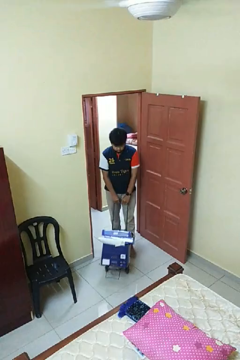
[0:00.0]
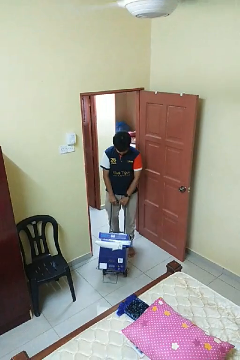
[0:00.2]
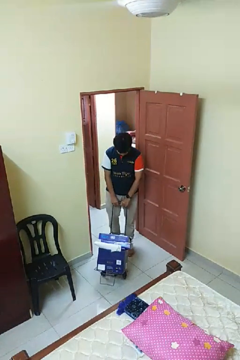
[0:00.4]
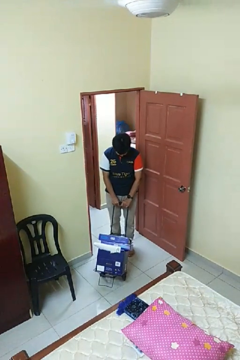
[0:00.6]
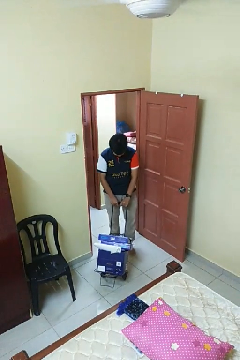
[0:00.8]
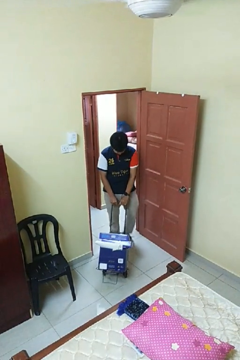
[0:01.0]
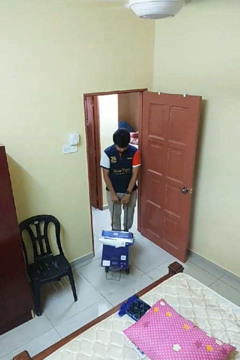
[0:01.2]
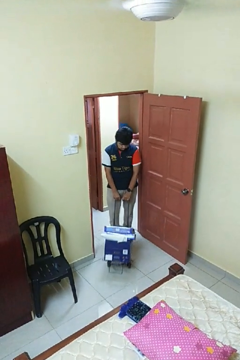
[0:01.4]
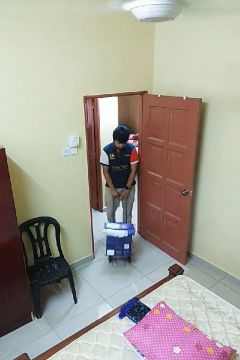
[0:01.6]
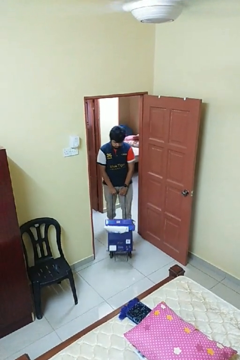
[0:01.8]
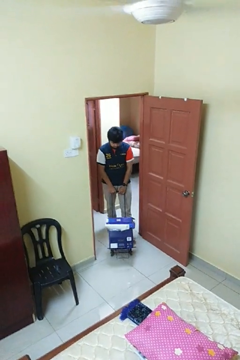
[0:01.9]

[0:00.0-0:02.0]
person pulls wheeled cart

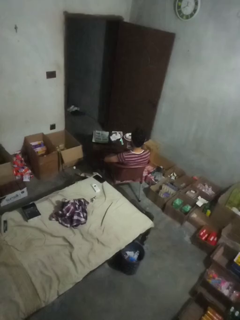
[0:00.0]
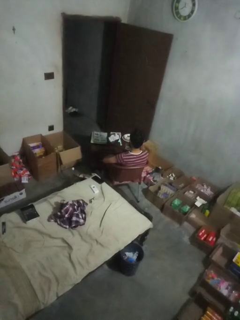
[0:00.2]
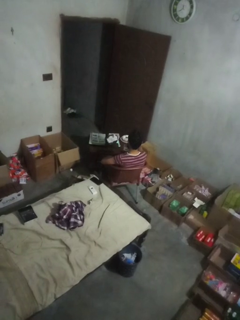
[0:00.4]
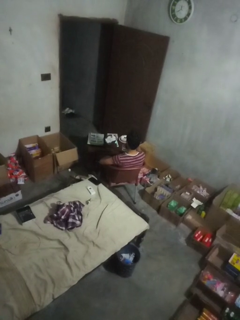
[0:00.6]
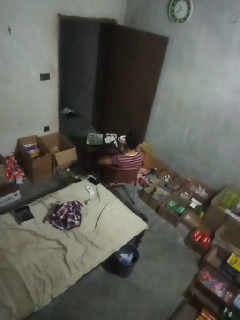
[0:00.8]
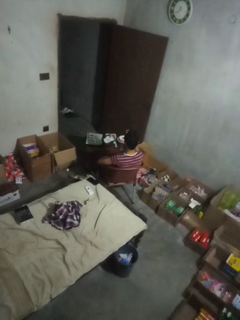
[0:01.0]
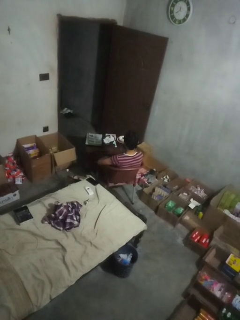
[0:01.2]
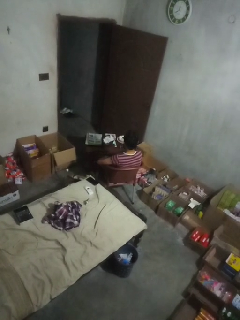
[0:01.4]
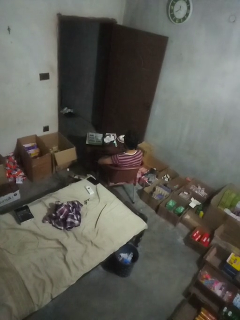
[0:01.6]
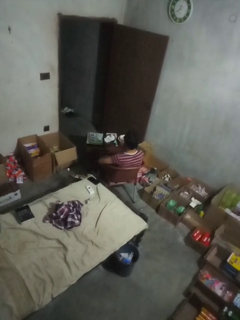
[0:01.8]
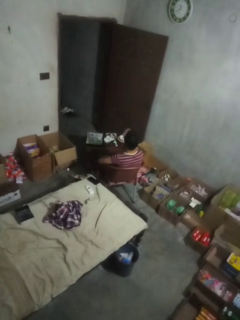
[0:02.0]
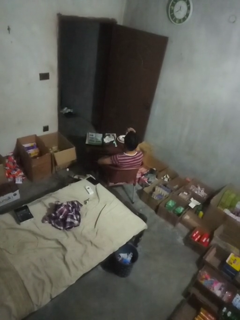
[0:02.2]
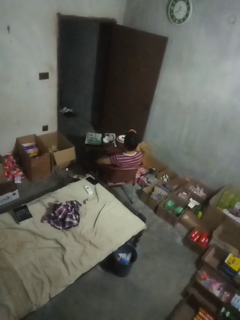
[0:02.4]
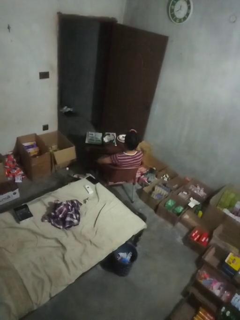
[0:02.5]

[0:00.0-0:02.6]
person picks up object from table

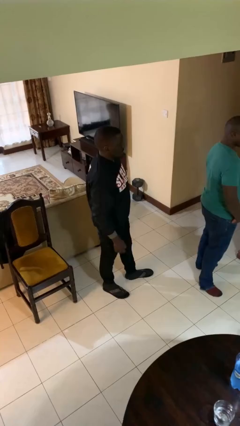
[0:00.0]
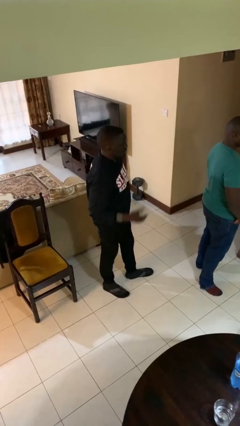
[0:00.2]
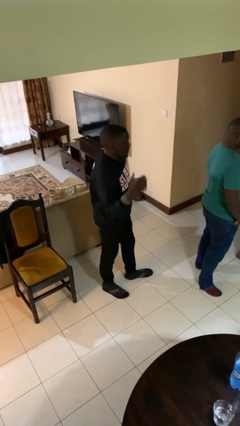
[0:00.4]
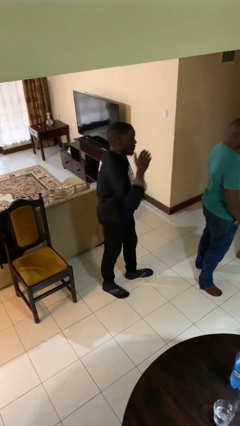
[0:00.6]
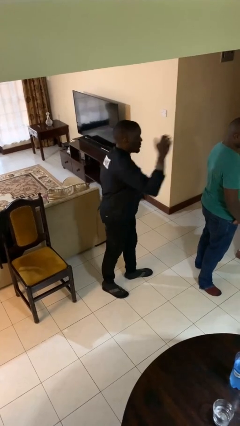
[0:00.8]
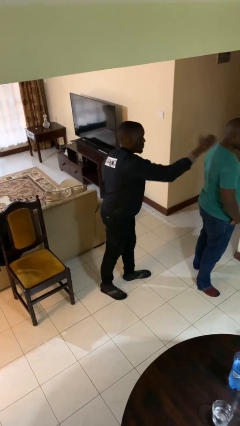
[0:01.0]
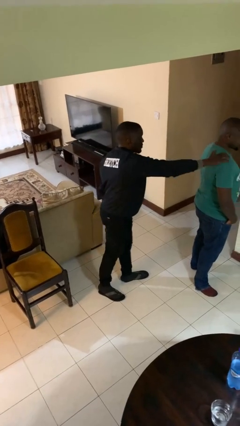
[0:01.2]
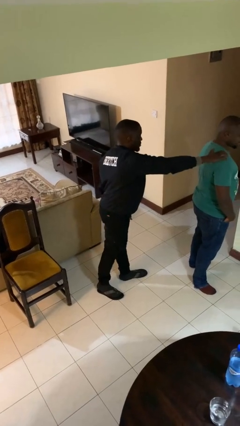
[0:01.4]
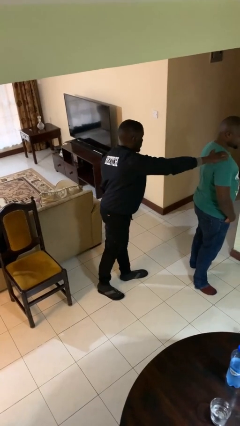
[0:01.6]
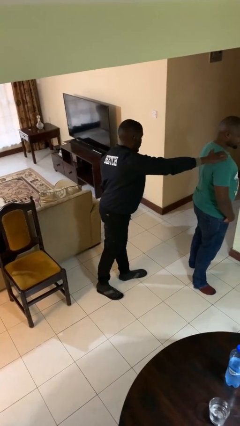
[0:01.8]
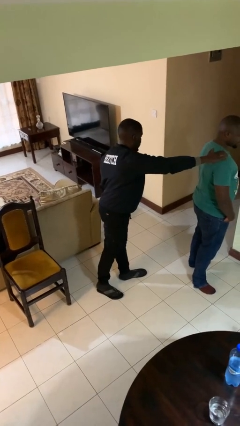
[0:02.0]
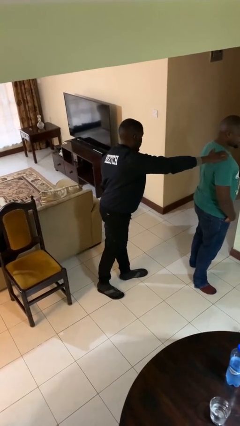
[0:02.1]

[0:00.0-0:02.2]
person grabs person by shoulder

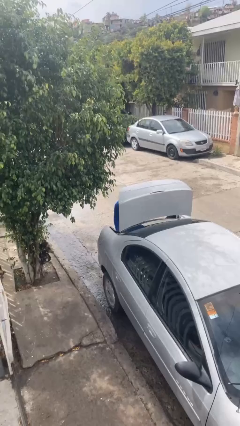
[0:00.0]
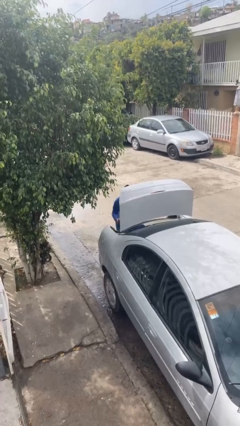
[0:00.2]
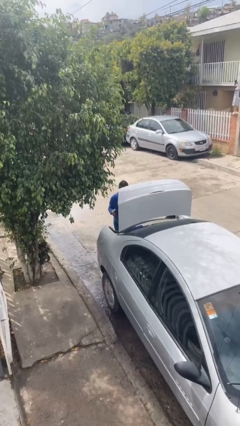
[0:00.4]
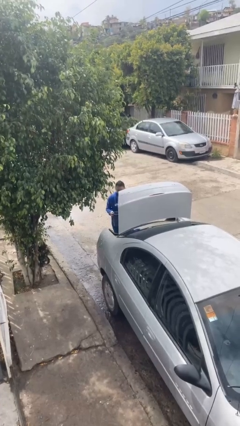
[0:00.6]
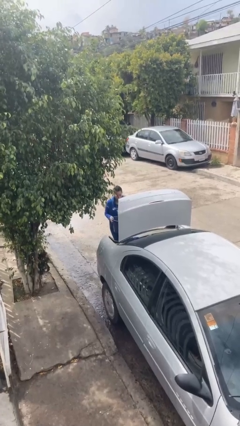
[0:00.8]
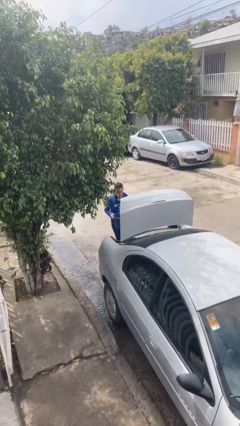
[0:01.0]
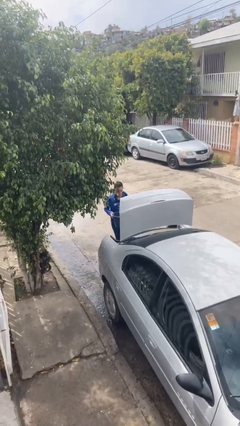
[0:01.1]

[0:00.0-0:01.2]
person unloads car

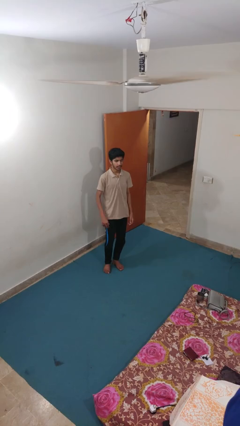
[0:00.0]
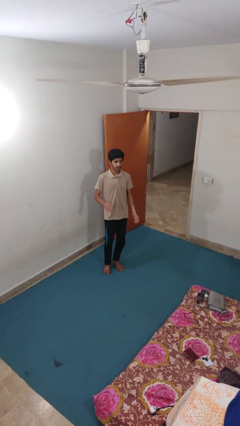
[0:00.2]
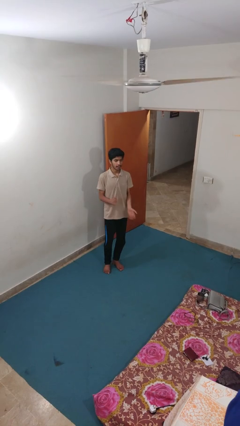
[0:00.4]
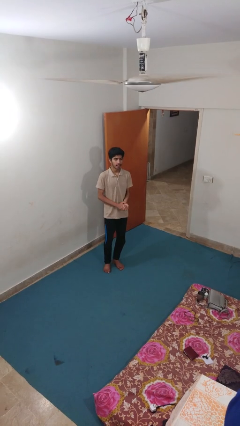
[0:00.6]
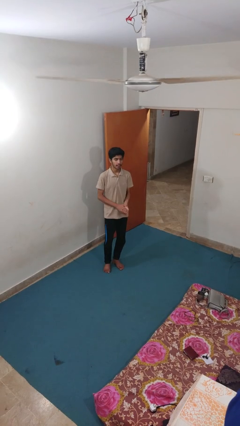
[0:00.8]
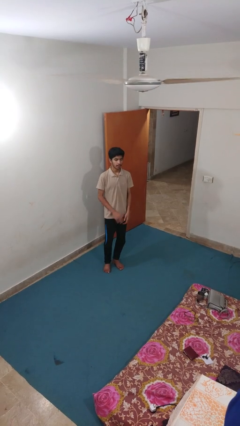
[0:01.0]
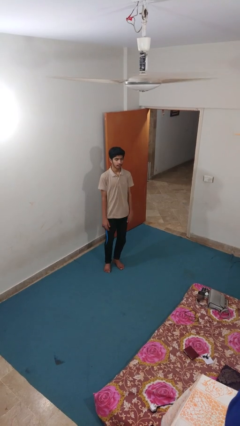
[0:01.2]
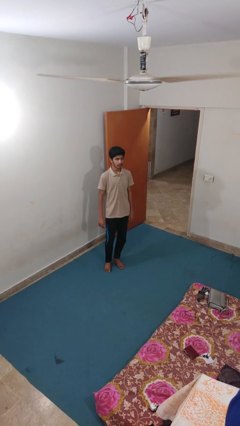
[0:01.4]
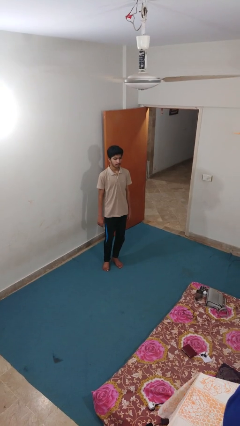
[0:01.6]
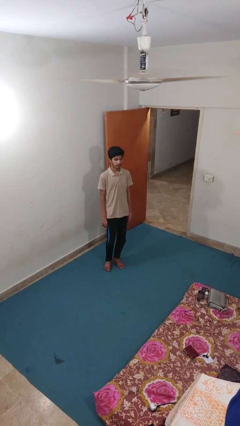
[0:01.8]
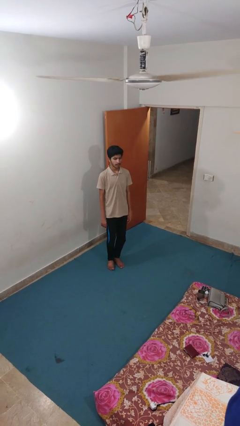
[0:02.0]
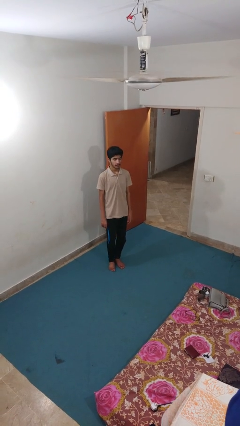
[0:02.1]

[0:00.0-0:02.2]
person claps hands

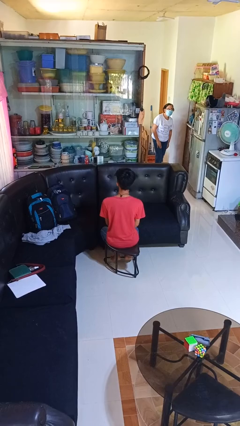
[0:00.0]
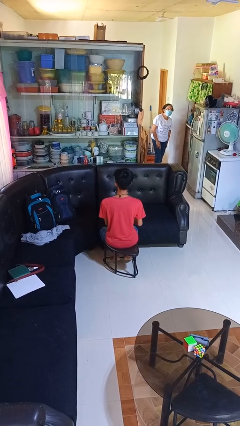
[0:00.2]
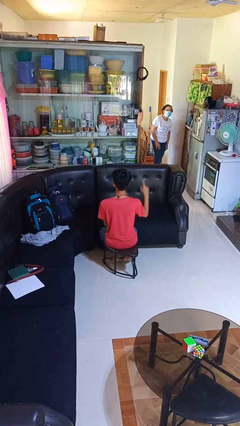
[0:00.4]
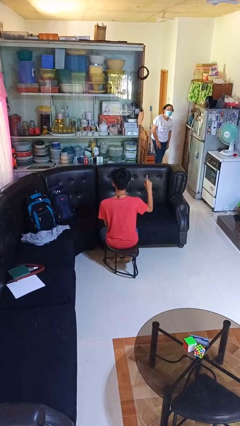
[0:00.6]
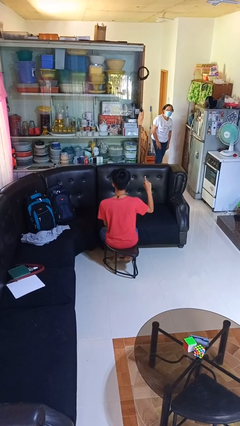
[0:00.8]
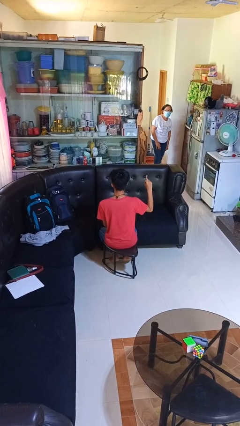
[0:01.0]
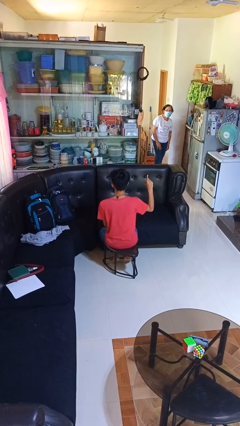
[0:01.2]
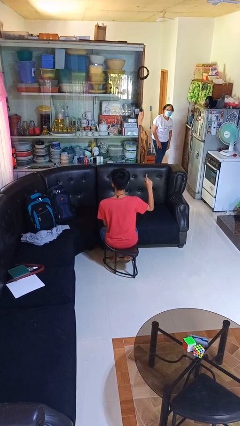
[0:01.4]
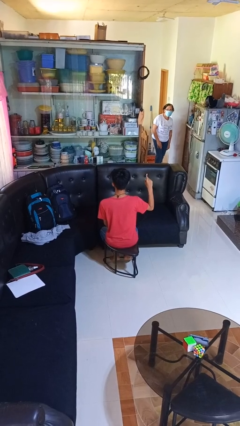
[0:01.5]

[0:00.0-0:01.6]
person gestures number one

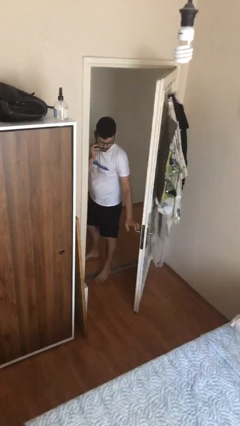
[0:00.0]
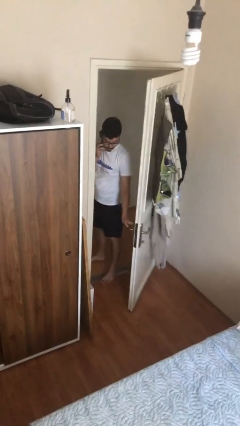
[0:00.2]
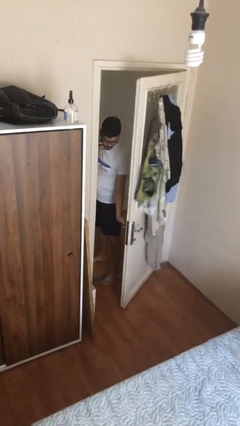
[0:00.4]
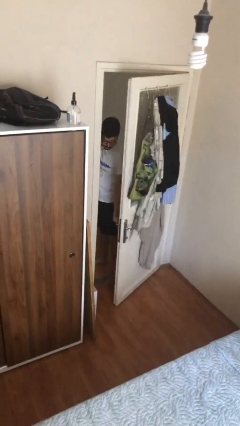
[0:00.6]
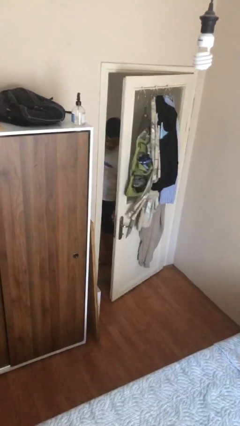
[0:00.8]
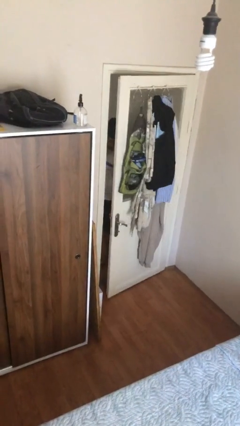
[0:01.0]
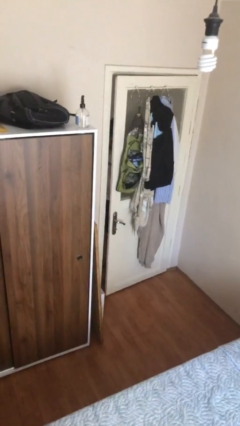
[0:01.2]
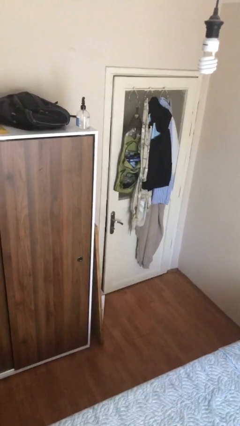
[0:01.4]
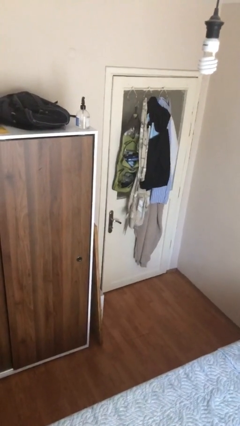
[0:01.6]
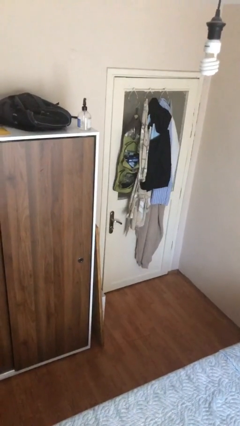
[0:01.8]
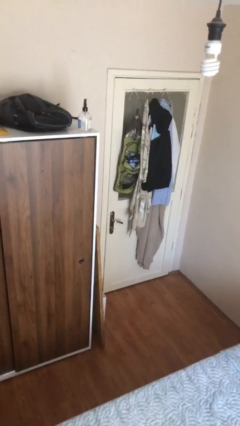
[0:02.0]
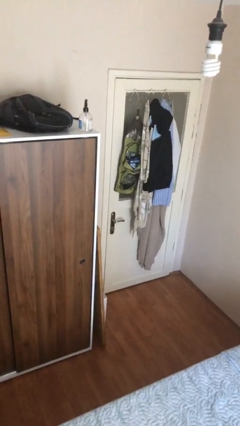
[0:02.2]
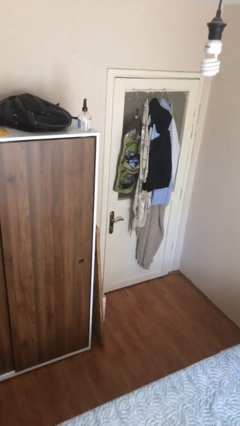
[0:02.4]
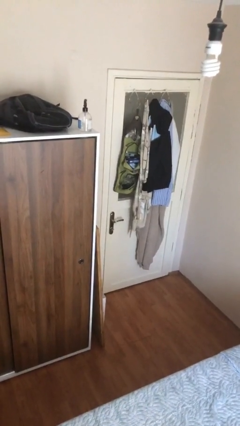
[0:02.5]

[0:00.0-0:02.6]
person closes facility door

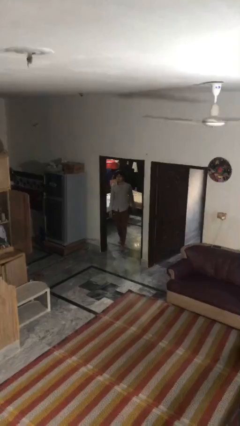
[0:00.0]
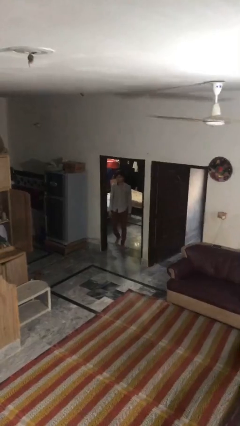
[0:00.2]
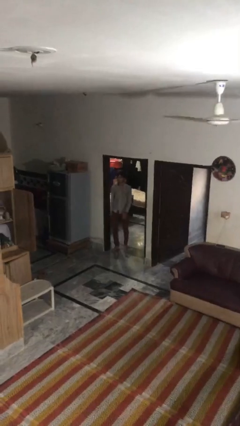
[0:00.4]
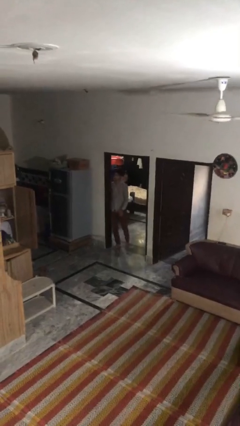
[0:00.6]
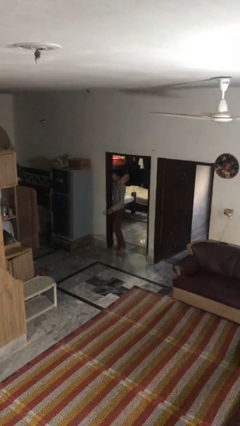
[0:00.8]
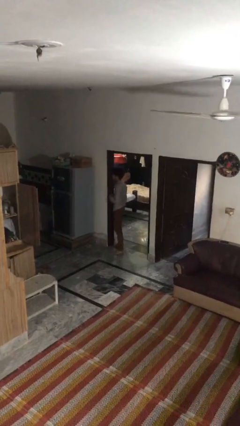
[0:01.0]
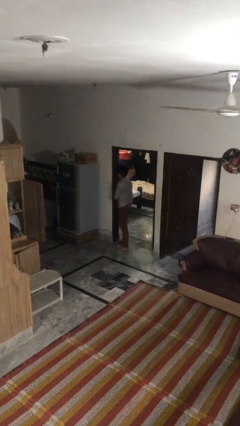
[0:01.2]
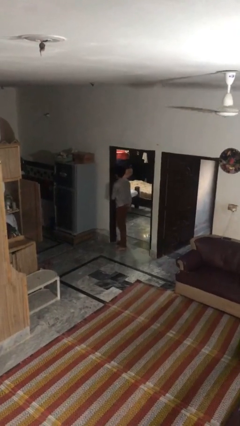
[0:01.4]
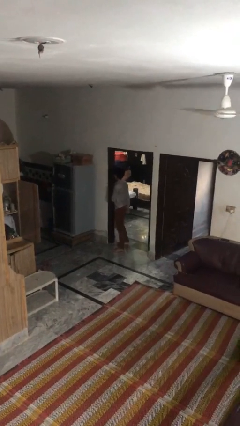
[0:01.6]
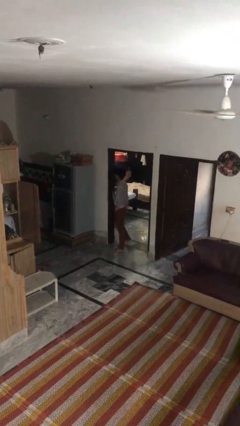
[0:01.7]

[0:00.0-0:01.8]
person bumps into wall

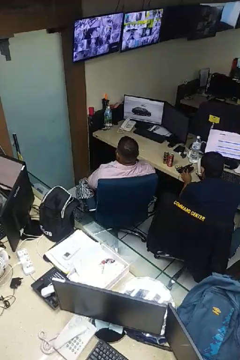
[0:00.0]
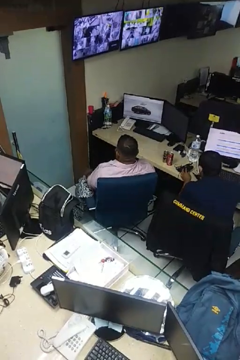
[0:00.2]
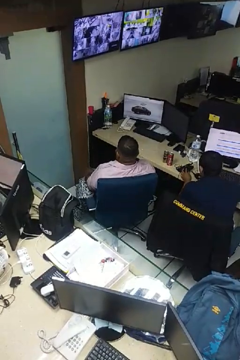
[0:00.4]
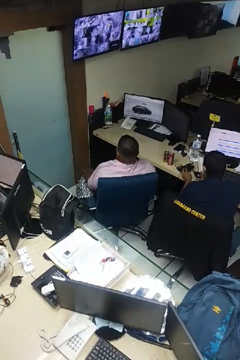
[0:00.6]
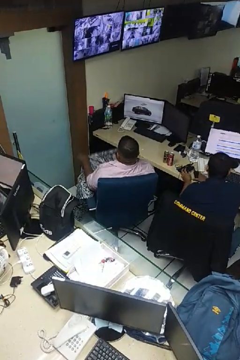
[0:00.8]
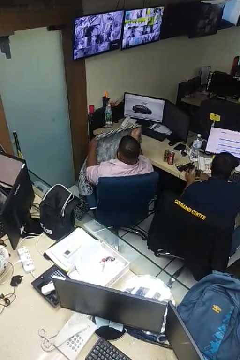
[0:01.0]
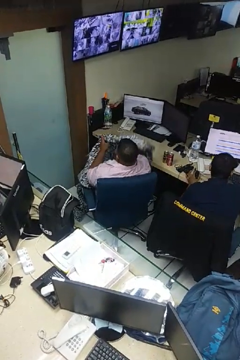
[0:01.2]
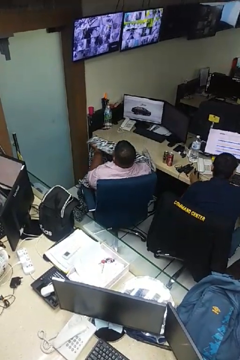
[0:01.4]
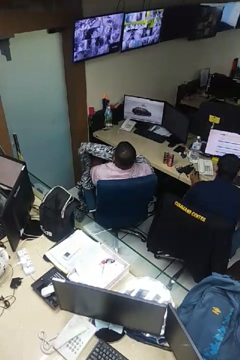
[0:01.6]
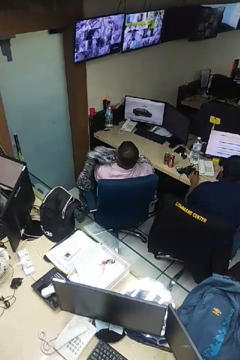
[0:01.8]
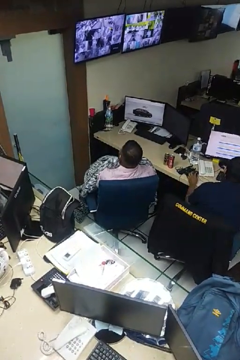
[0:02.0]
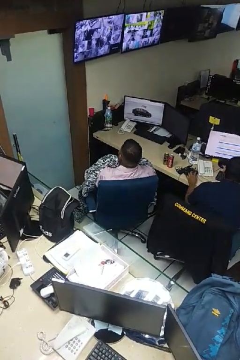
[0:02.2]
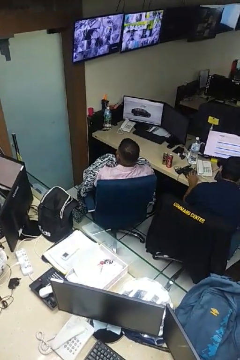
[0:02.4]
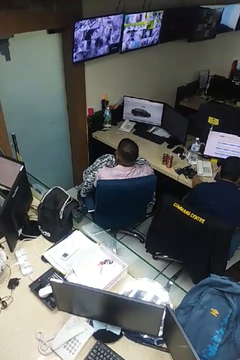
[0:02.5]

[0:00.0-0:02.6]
person covers with blanket
